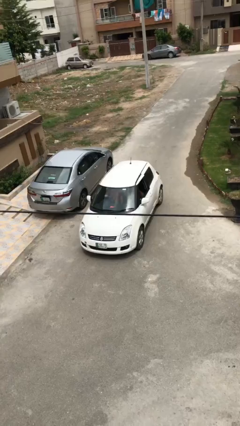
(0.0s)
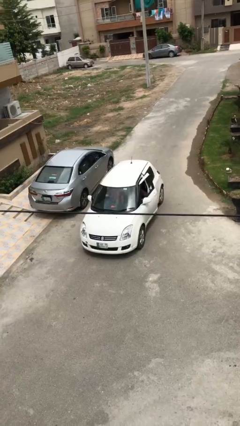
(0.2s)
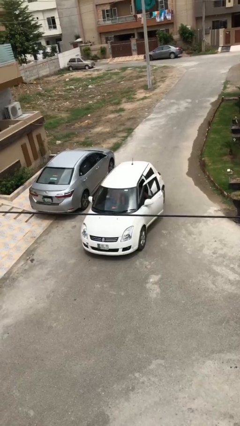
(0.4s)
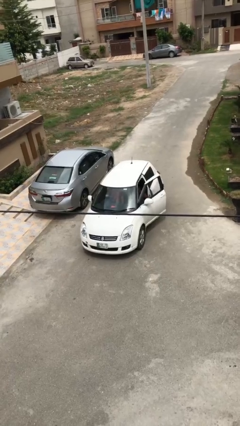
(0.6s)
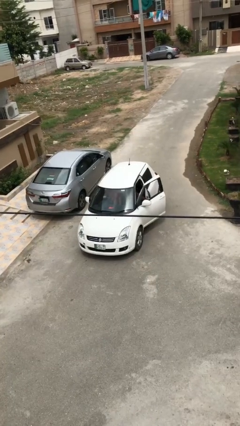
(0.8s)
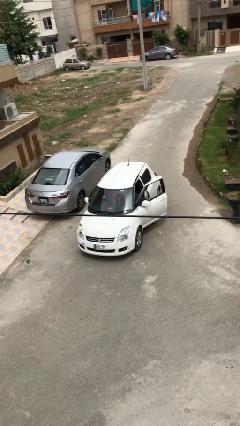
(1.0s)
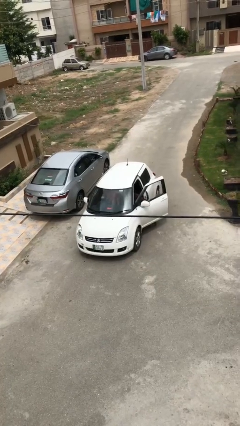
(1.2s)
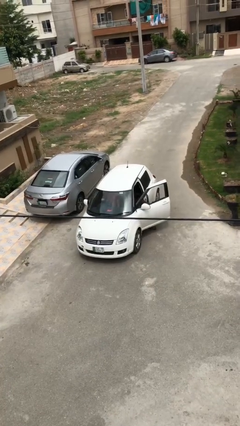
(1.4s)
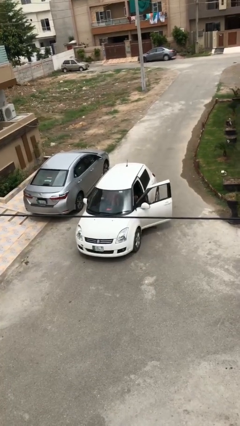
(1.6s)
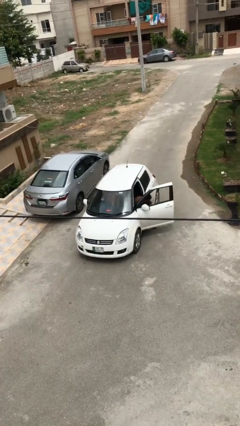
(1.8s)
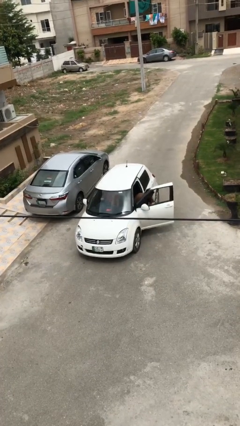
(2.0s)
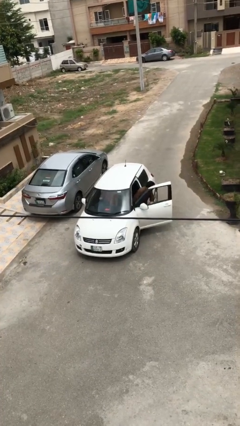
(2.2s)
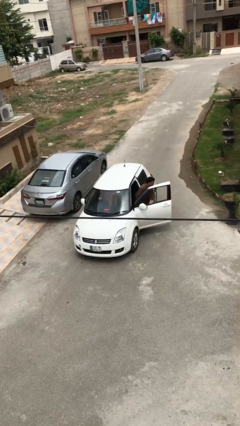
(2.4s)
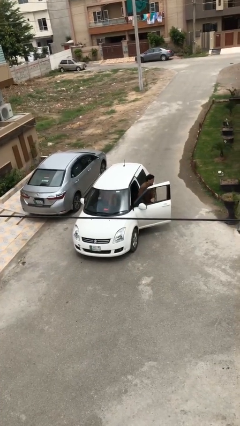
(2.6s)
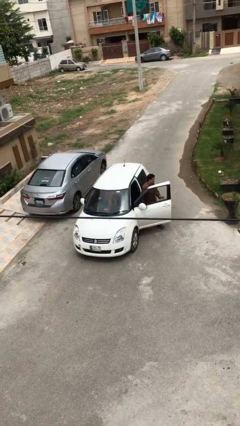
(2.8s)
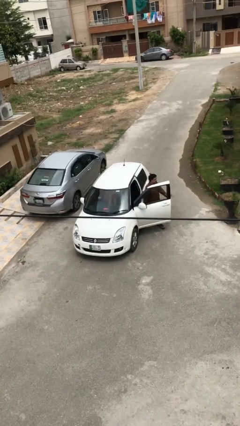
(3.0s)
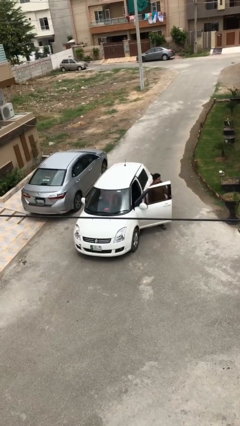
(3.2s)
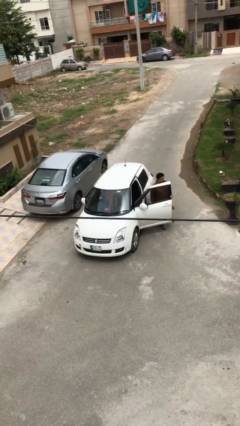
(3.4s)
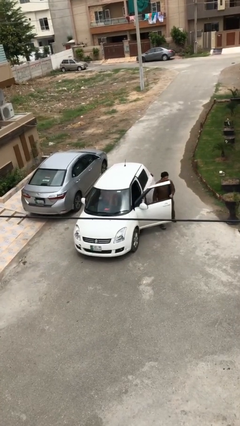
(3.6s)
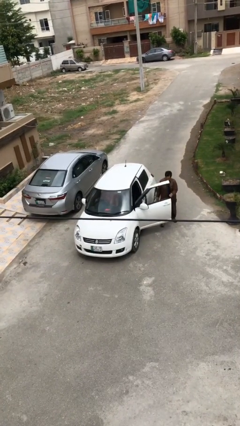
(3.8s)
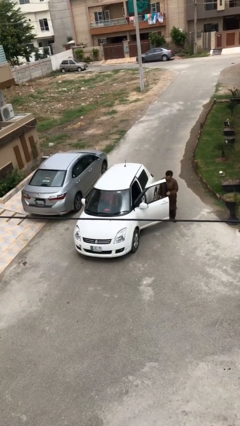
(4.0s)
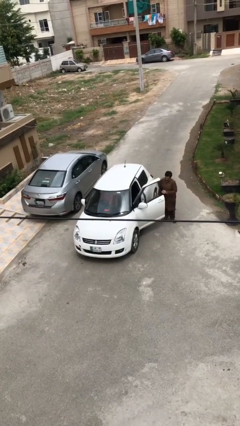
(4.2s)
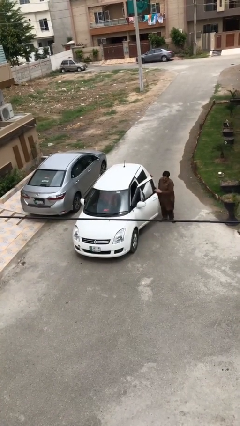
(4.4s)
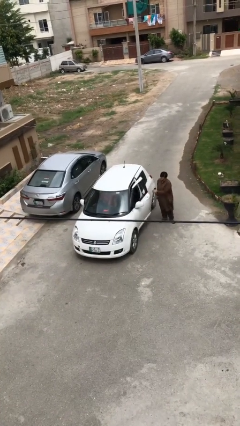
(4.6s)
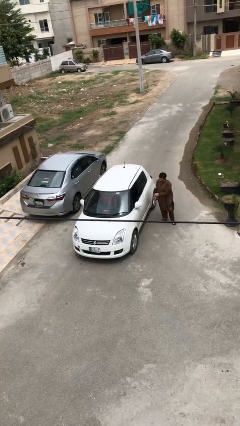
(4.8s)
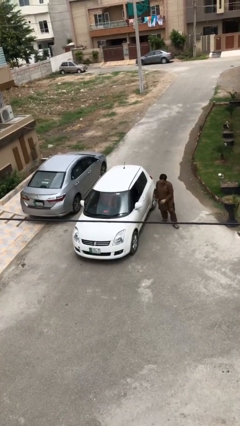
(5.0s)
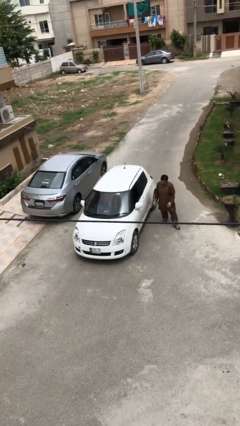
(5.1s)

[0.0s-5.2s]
car drops off person

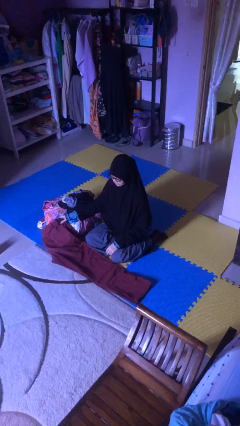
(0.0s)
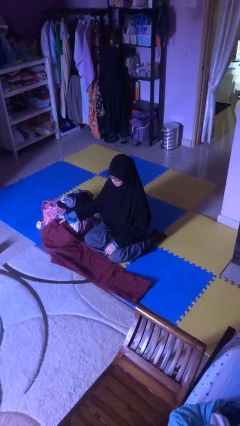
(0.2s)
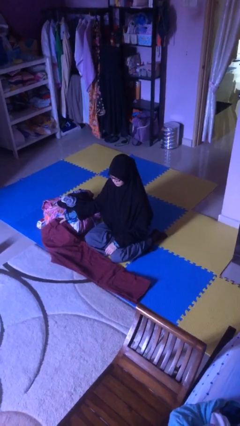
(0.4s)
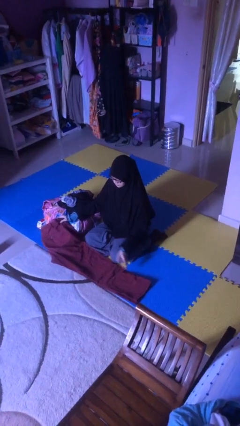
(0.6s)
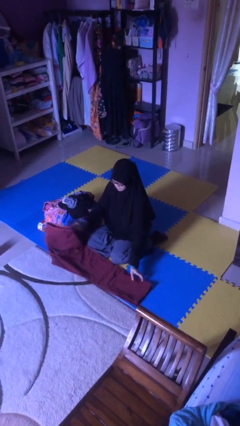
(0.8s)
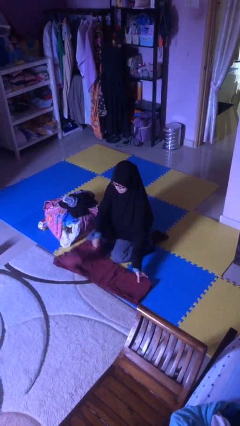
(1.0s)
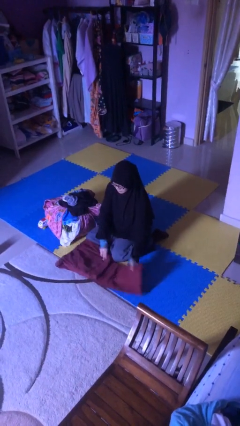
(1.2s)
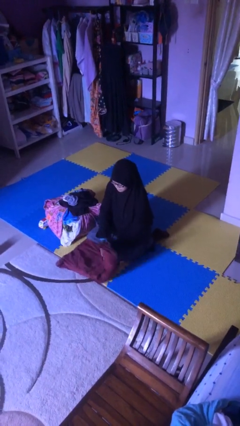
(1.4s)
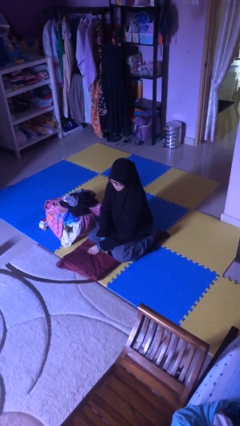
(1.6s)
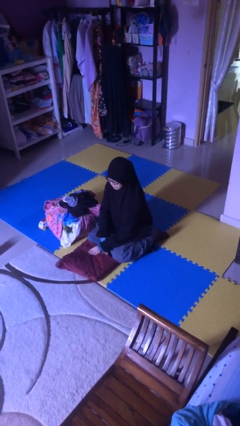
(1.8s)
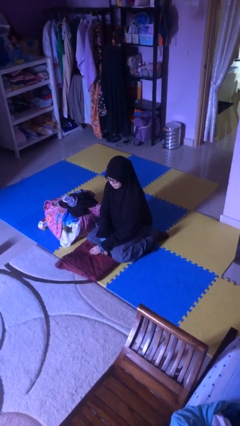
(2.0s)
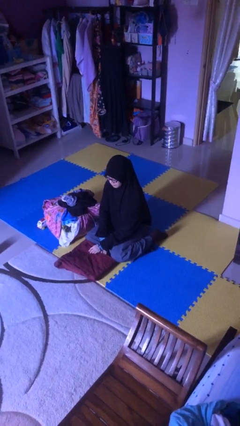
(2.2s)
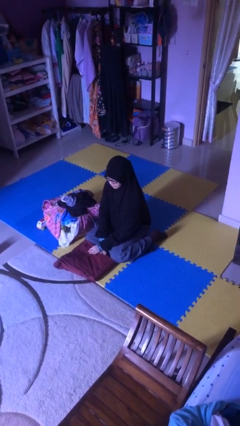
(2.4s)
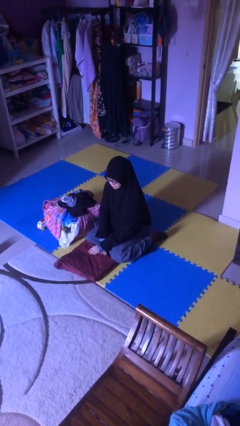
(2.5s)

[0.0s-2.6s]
person folds pants

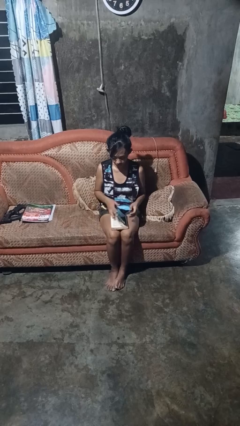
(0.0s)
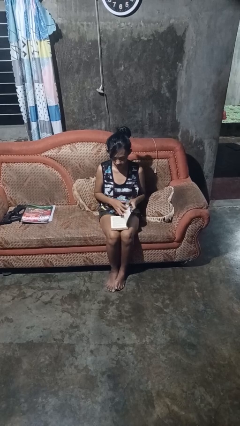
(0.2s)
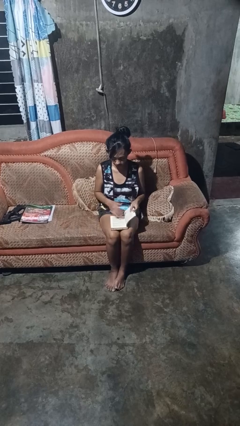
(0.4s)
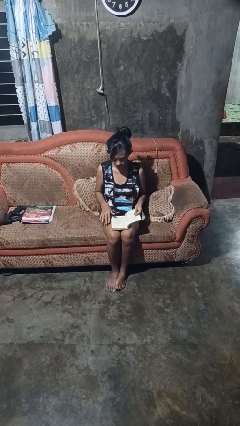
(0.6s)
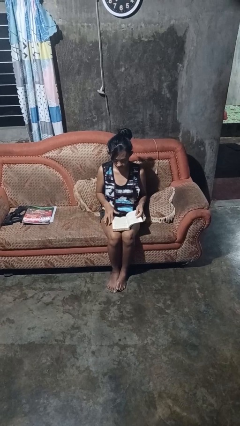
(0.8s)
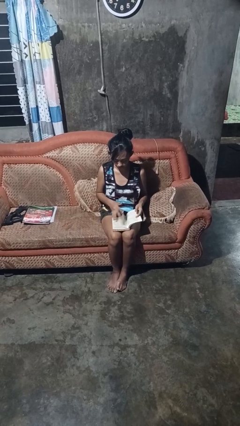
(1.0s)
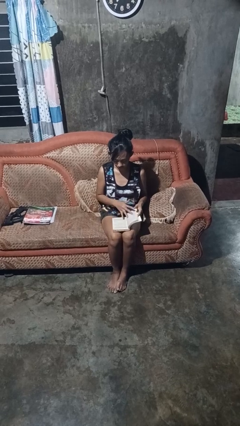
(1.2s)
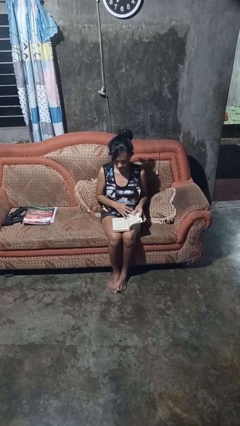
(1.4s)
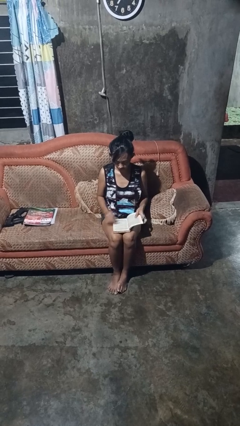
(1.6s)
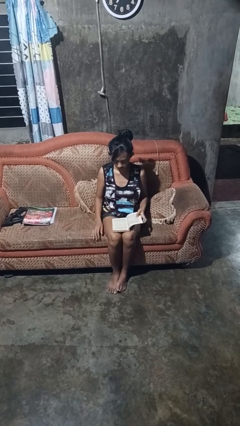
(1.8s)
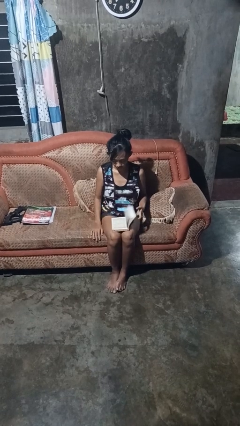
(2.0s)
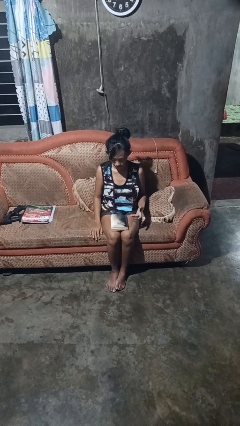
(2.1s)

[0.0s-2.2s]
person reads book

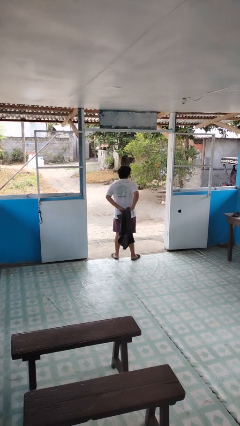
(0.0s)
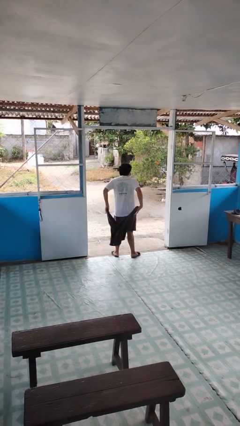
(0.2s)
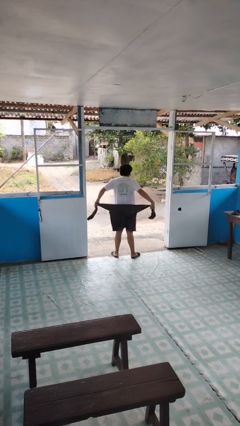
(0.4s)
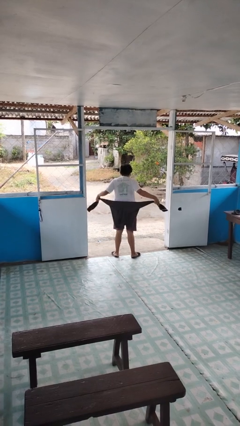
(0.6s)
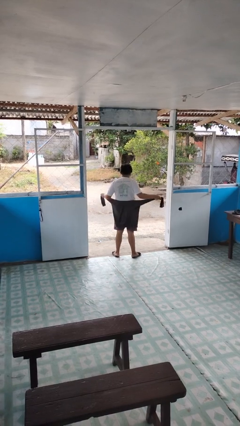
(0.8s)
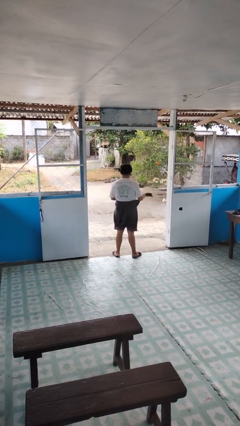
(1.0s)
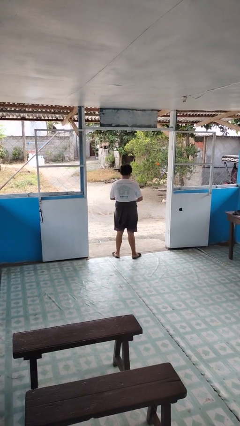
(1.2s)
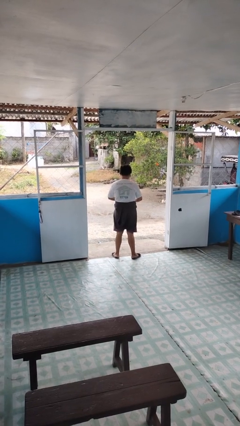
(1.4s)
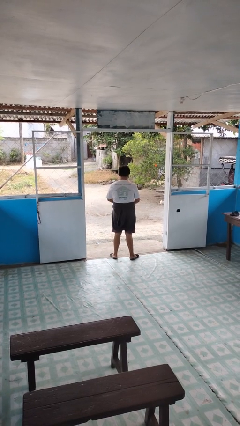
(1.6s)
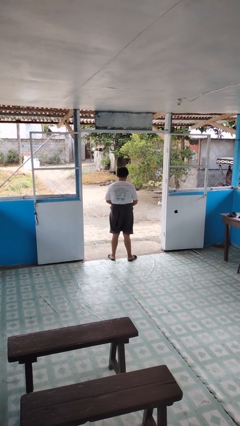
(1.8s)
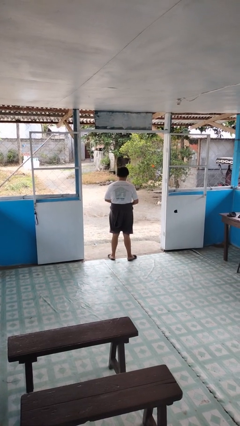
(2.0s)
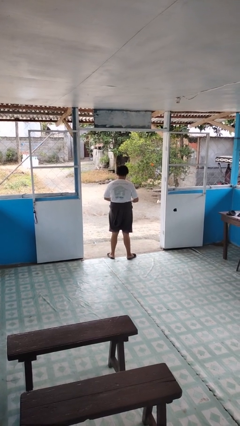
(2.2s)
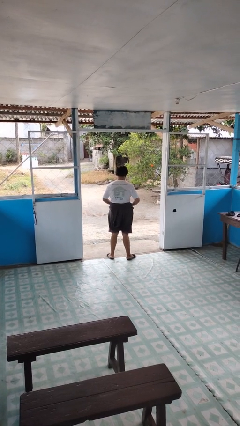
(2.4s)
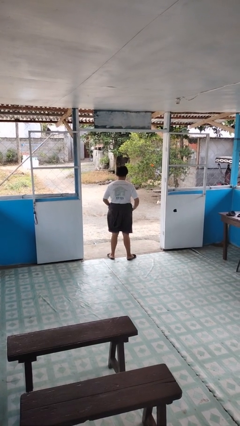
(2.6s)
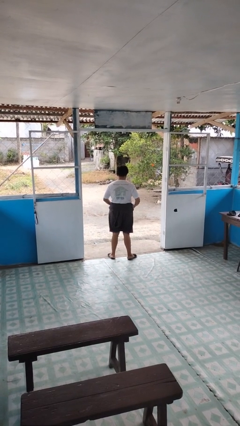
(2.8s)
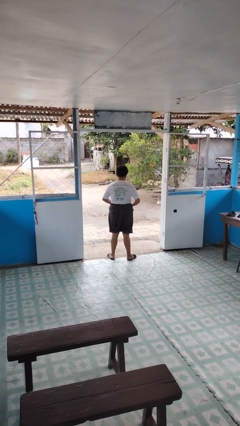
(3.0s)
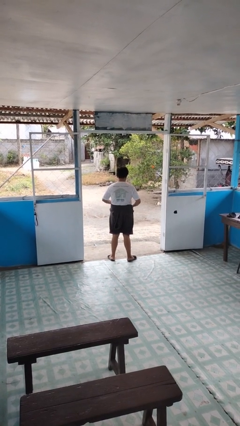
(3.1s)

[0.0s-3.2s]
person ties jacket around waist

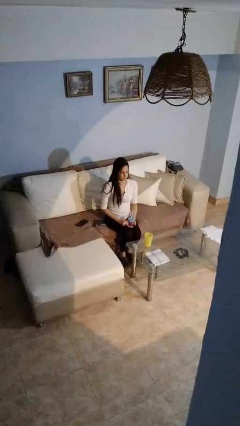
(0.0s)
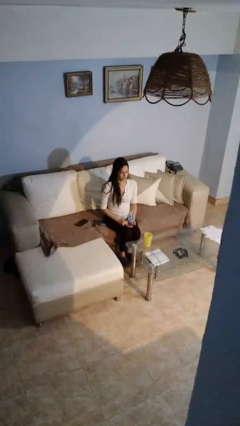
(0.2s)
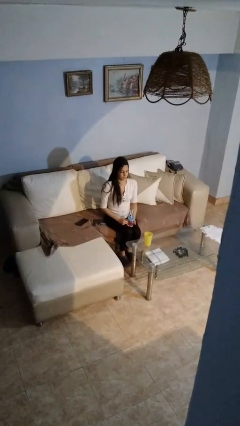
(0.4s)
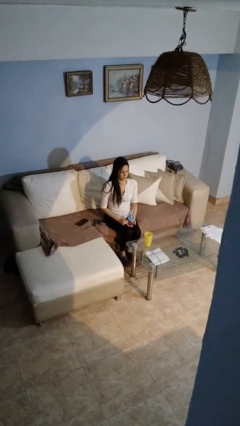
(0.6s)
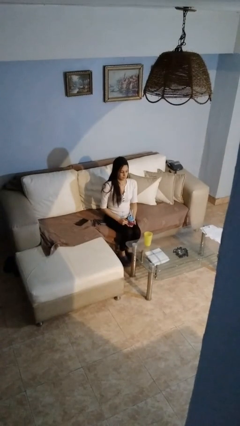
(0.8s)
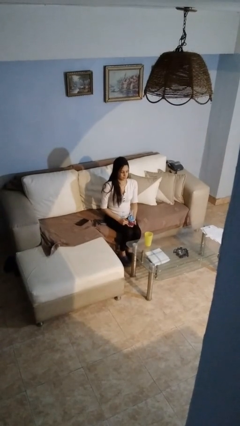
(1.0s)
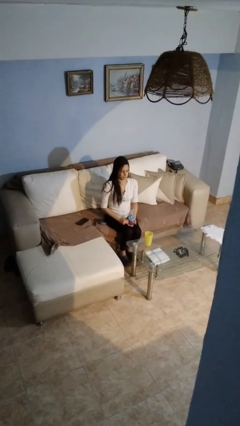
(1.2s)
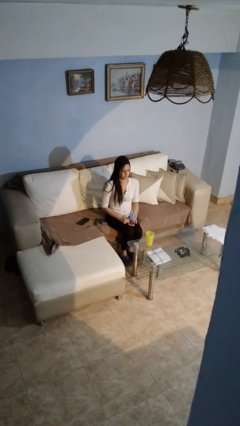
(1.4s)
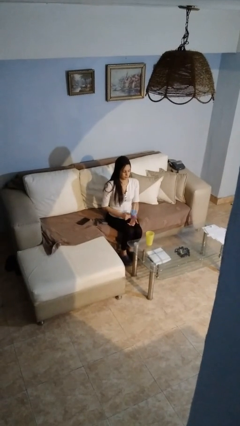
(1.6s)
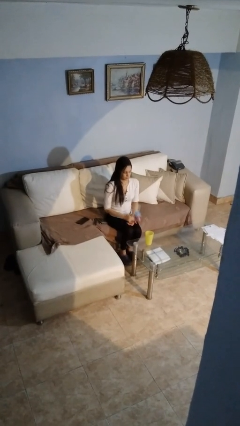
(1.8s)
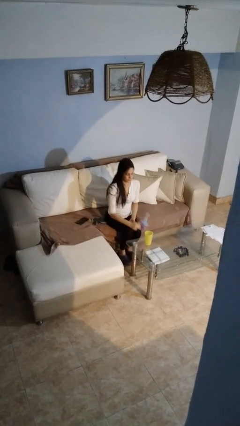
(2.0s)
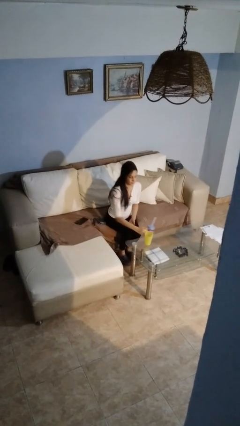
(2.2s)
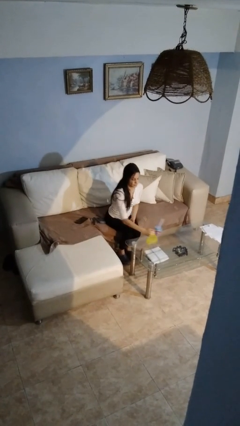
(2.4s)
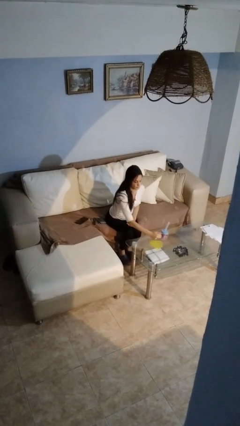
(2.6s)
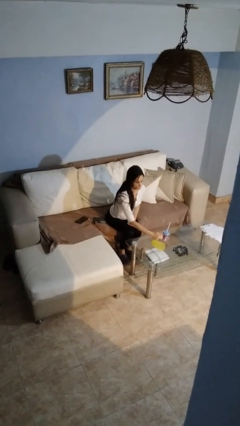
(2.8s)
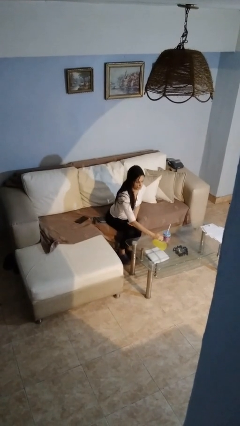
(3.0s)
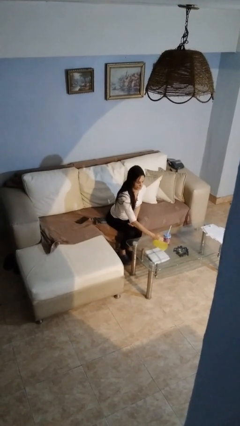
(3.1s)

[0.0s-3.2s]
person knocks over glass

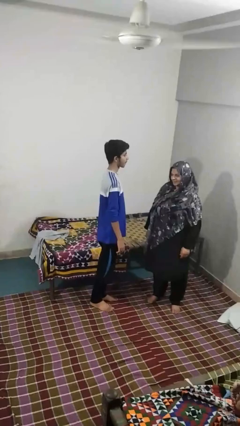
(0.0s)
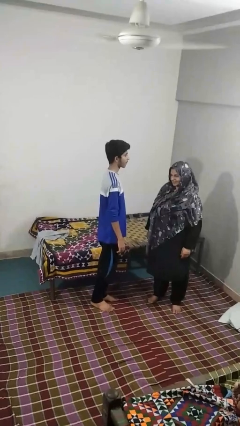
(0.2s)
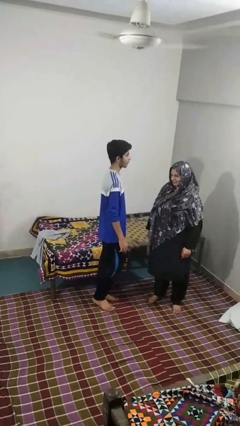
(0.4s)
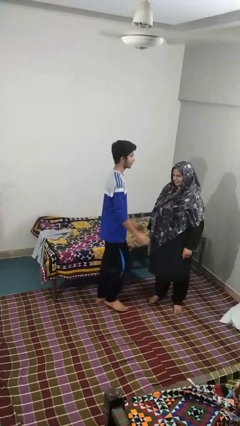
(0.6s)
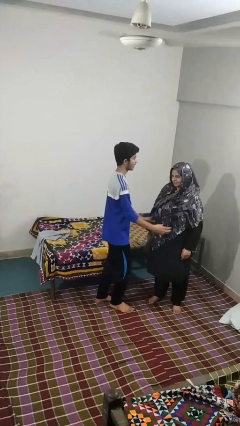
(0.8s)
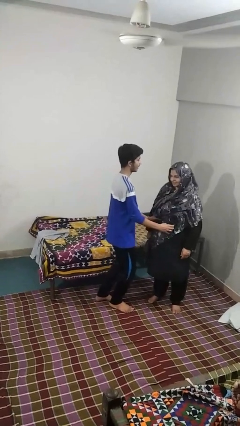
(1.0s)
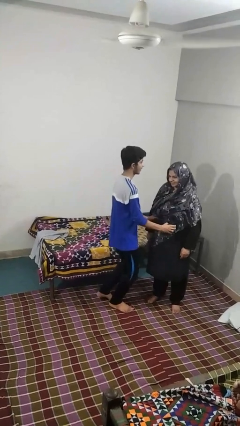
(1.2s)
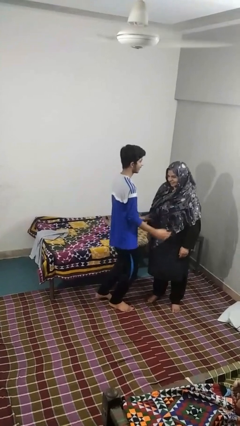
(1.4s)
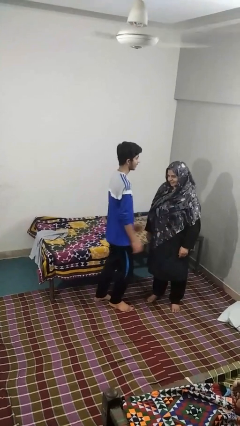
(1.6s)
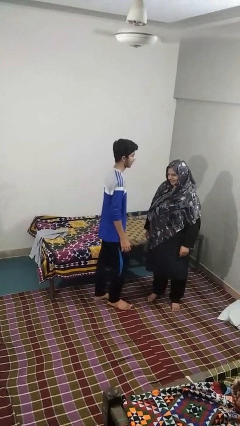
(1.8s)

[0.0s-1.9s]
person tickles person
